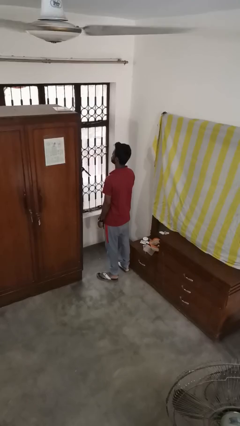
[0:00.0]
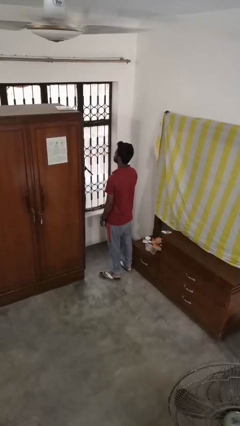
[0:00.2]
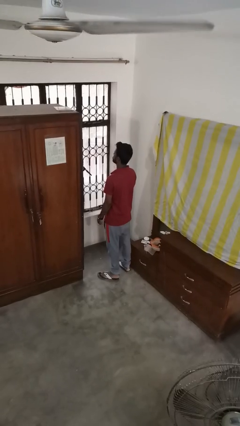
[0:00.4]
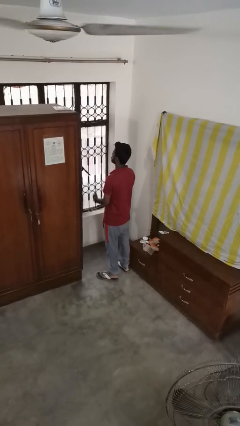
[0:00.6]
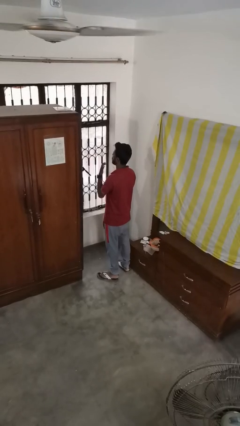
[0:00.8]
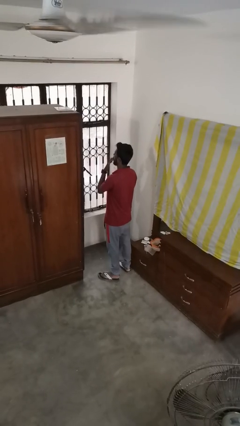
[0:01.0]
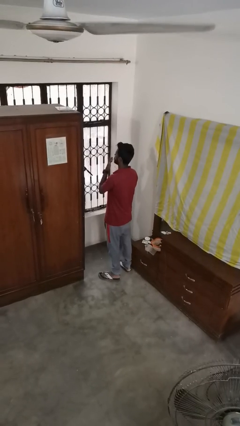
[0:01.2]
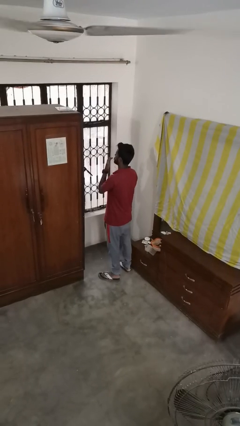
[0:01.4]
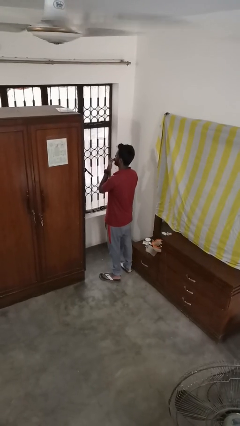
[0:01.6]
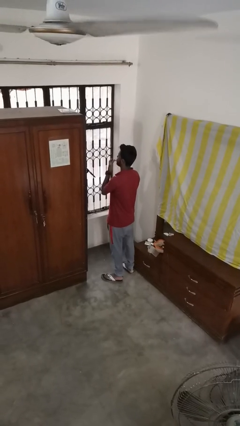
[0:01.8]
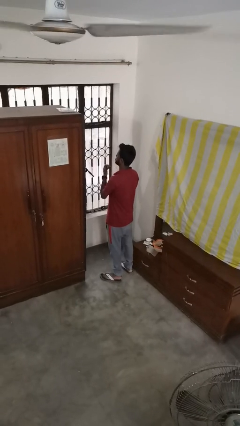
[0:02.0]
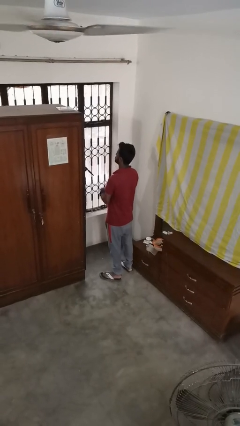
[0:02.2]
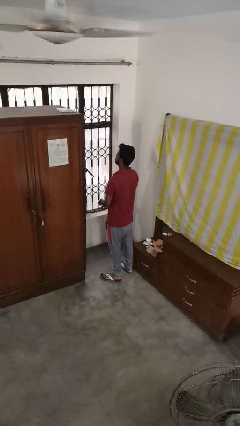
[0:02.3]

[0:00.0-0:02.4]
person licks fingers

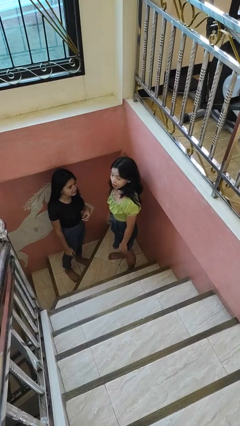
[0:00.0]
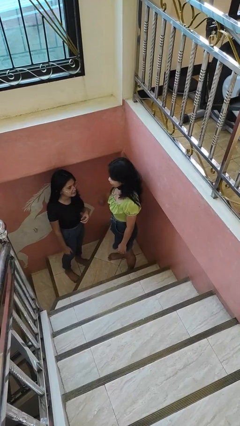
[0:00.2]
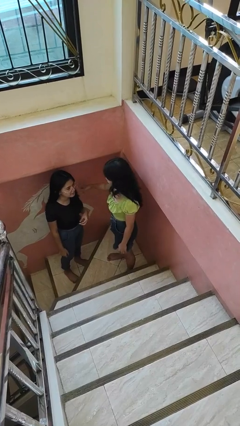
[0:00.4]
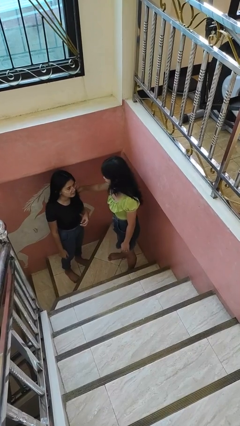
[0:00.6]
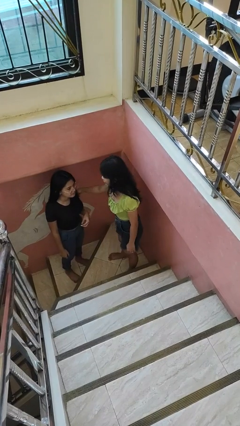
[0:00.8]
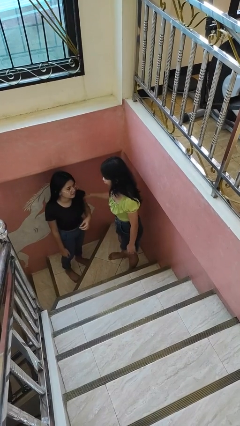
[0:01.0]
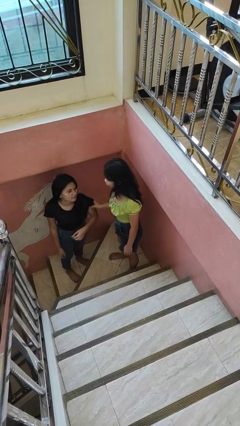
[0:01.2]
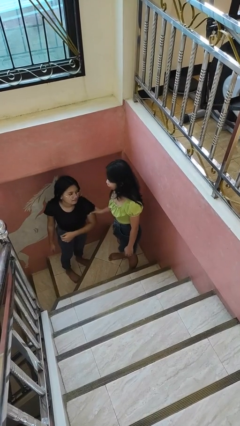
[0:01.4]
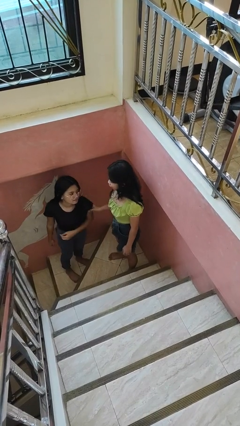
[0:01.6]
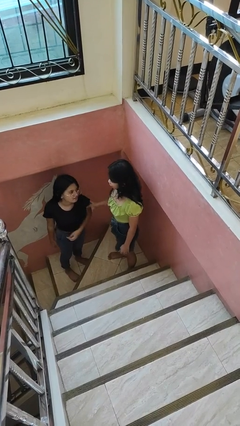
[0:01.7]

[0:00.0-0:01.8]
person grabs person by bicep

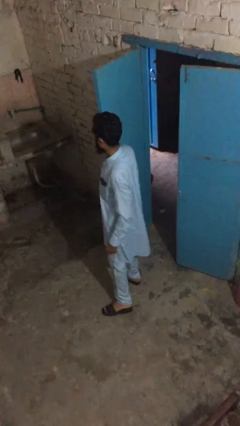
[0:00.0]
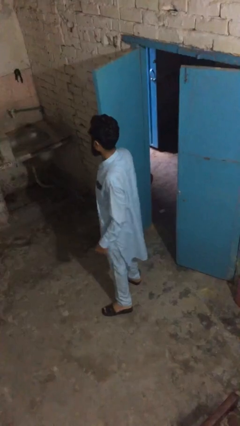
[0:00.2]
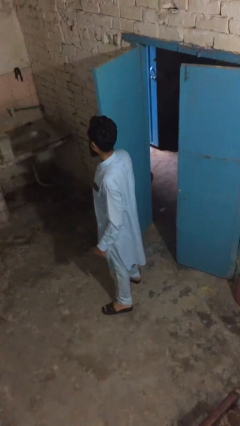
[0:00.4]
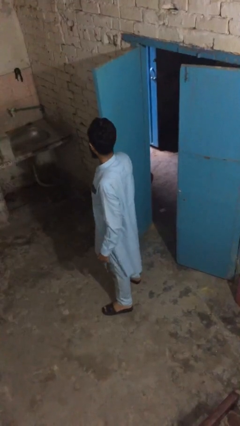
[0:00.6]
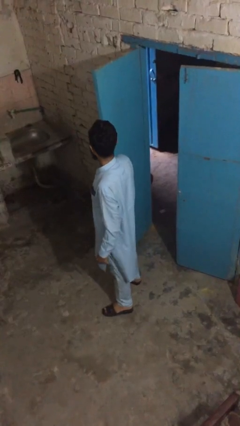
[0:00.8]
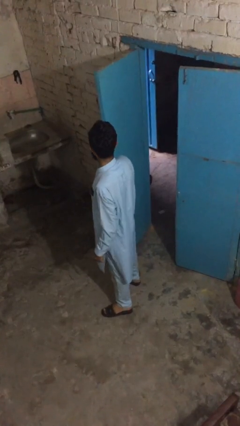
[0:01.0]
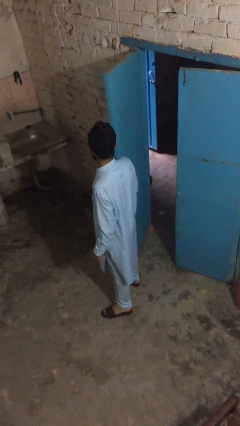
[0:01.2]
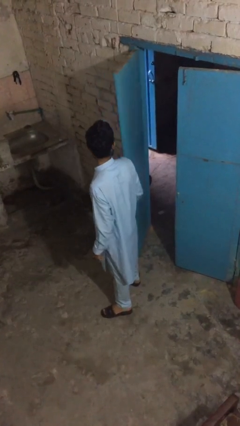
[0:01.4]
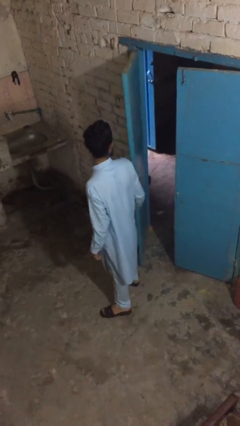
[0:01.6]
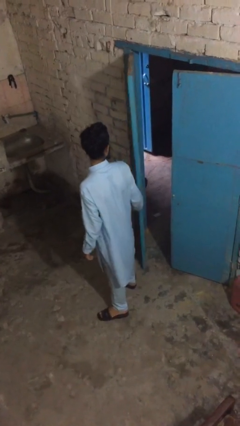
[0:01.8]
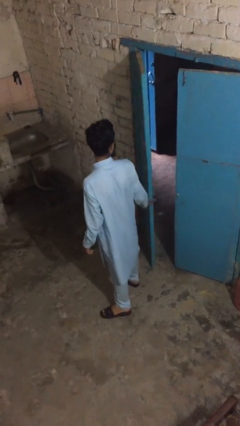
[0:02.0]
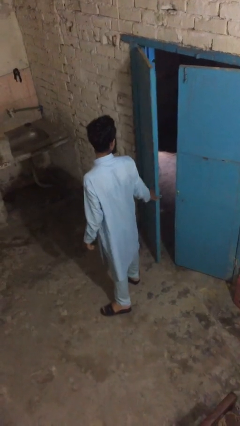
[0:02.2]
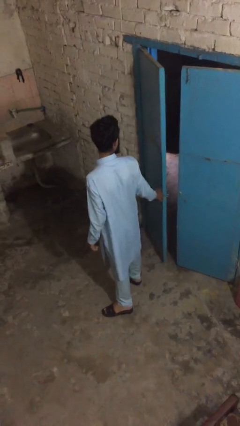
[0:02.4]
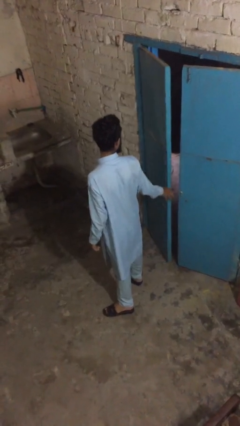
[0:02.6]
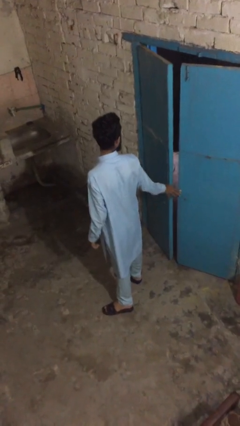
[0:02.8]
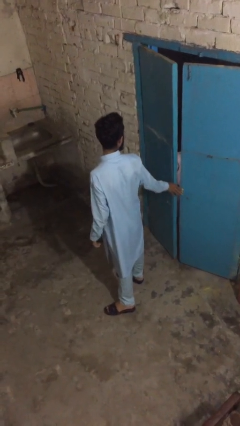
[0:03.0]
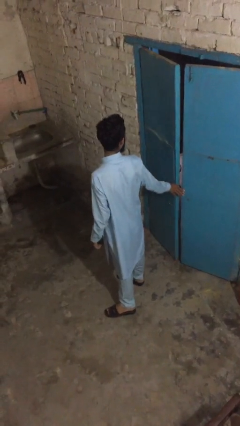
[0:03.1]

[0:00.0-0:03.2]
person closes facility door

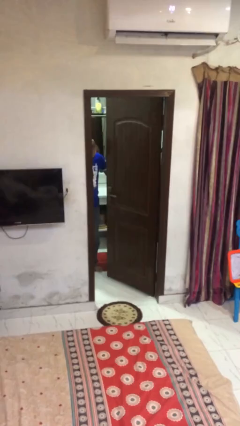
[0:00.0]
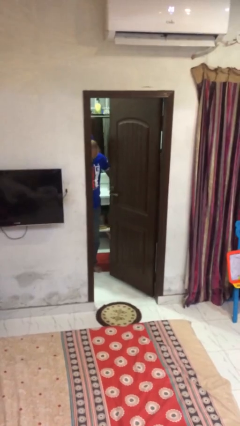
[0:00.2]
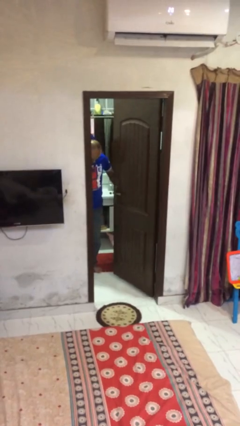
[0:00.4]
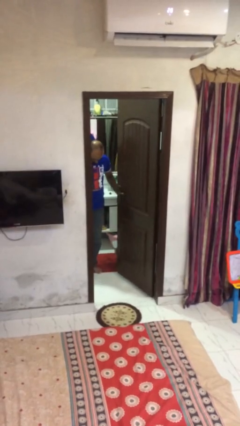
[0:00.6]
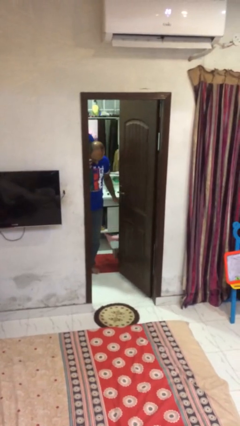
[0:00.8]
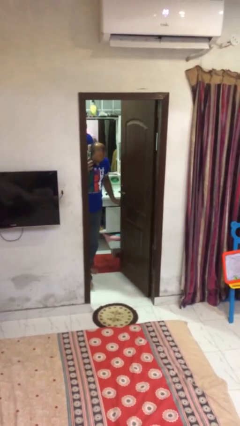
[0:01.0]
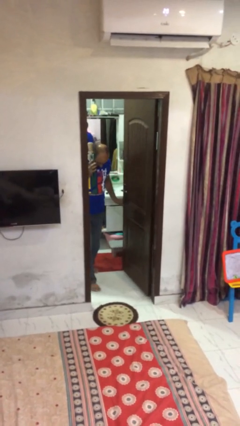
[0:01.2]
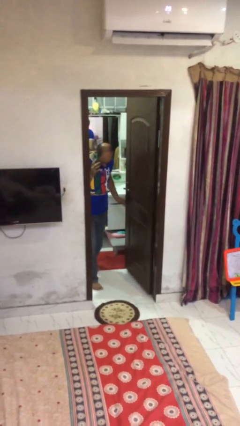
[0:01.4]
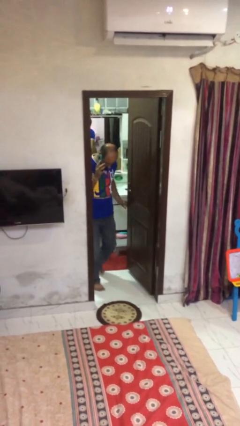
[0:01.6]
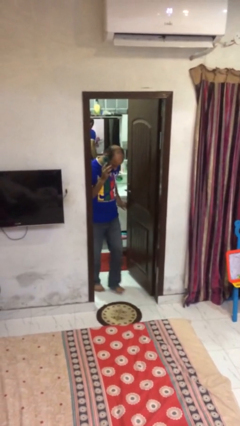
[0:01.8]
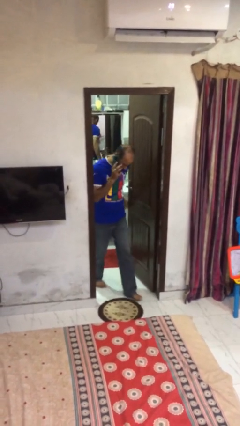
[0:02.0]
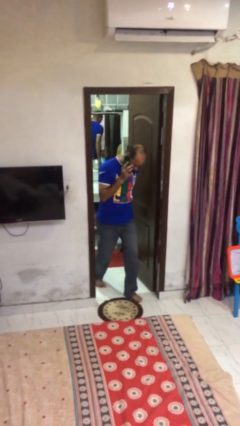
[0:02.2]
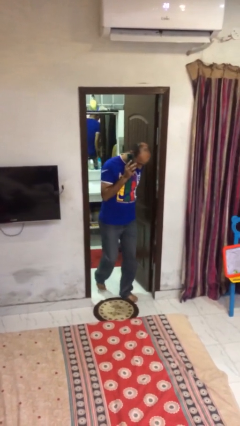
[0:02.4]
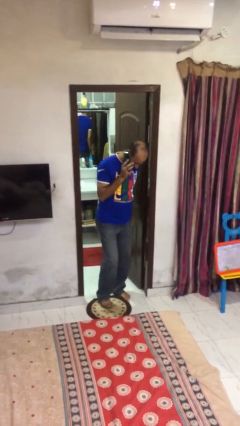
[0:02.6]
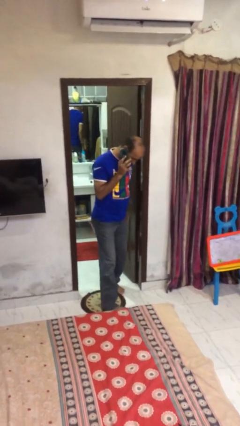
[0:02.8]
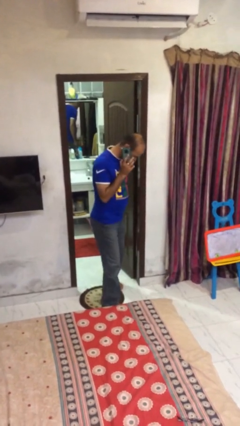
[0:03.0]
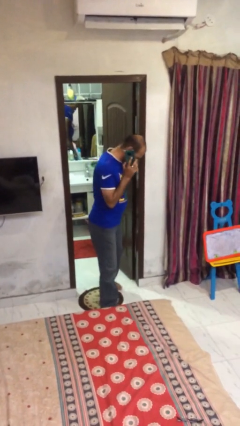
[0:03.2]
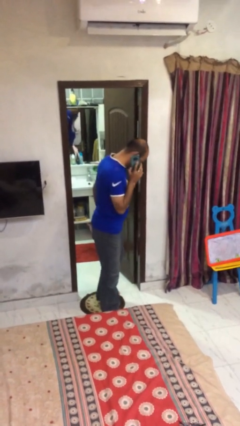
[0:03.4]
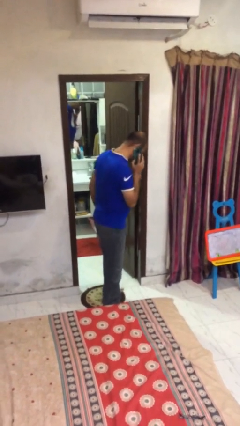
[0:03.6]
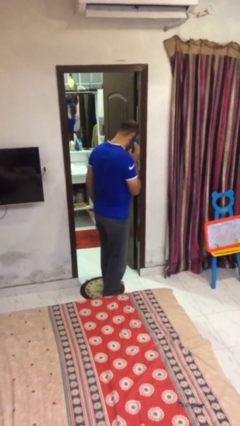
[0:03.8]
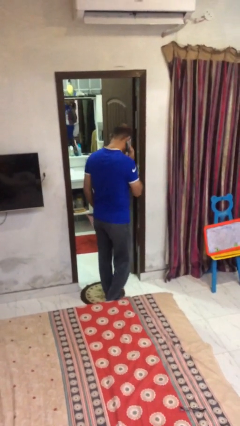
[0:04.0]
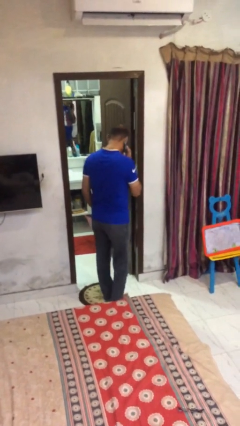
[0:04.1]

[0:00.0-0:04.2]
person enters scene through structure

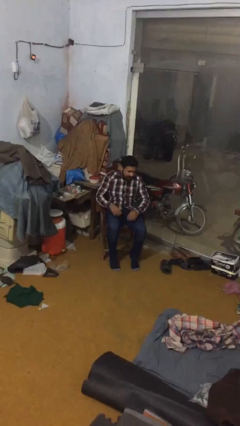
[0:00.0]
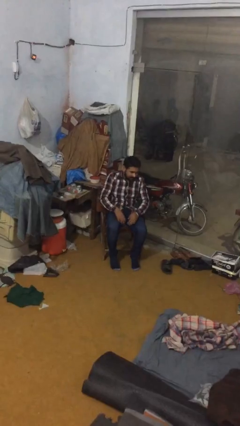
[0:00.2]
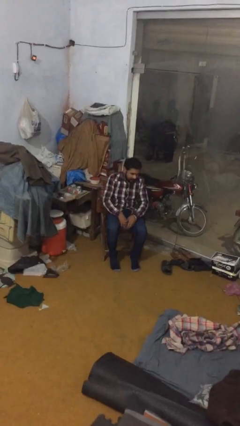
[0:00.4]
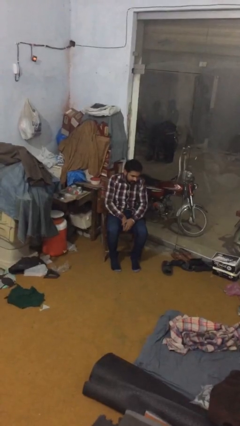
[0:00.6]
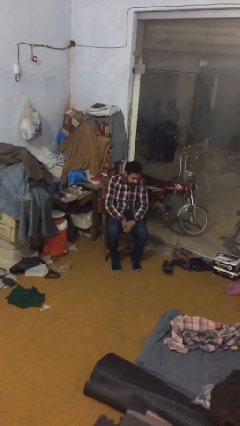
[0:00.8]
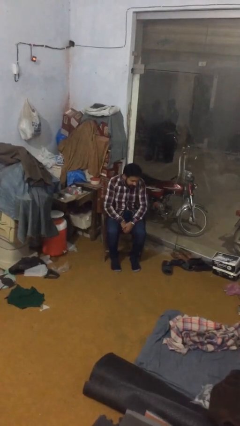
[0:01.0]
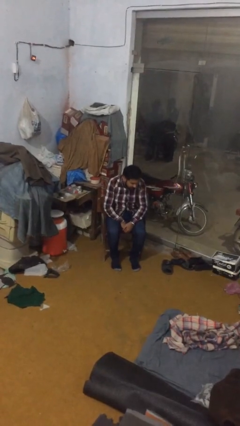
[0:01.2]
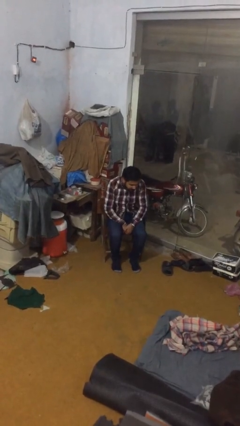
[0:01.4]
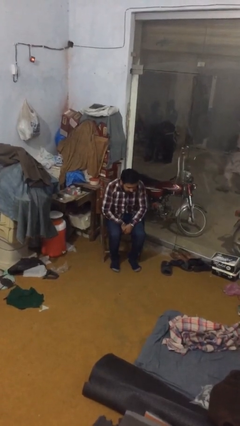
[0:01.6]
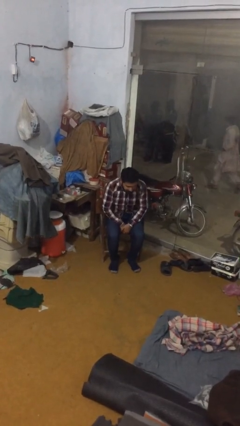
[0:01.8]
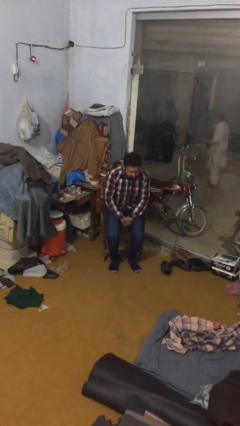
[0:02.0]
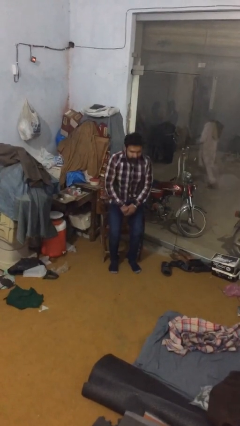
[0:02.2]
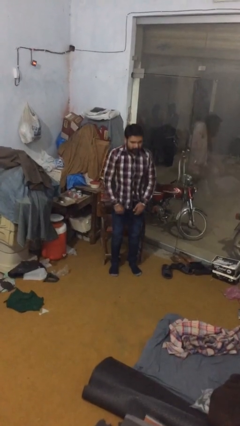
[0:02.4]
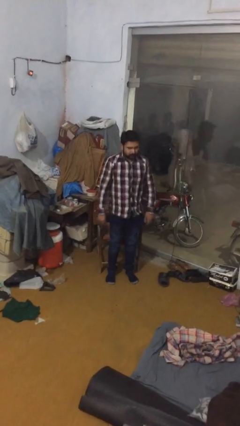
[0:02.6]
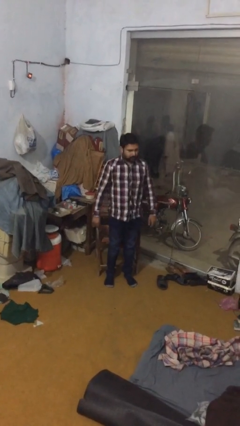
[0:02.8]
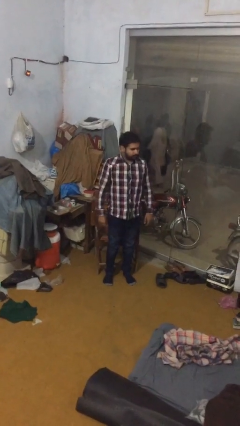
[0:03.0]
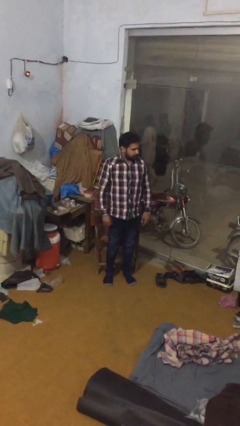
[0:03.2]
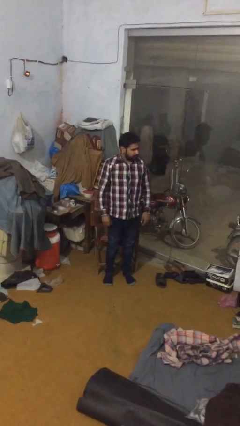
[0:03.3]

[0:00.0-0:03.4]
person stands up

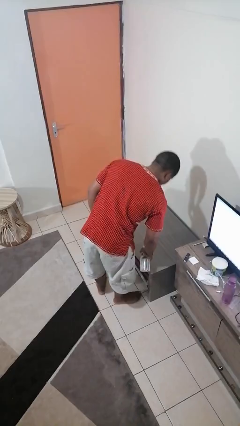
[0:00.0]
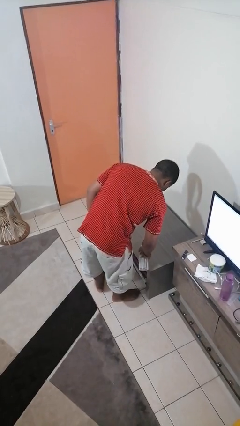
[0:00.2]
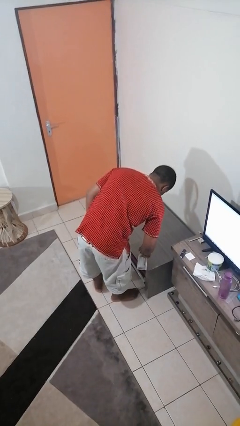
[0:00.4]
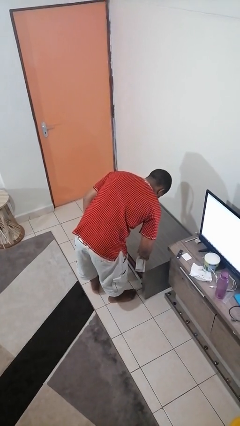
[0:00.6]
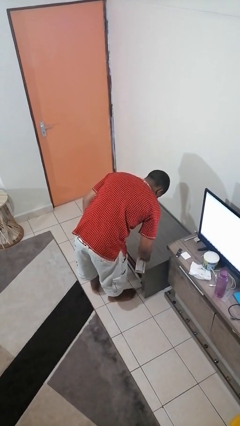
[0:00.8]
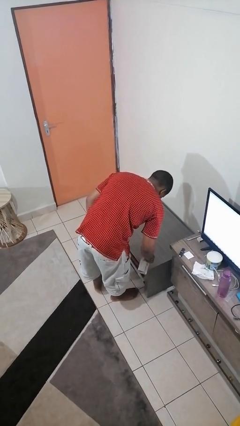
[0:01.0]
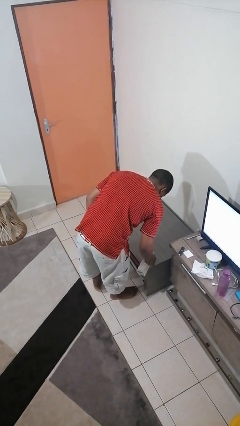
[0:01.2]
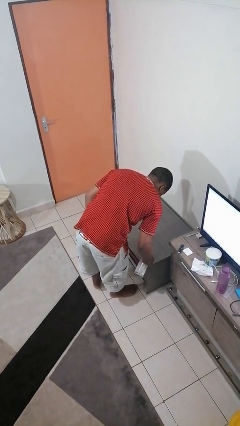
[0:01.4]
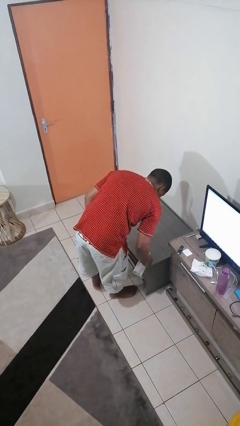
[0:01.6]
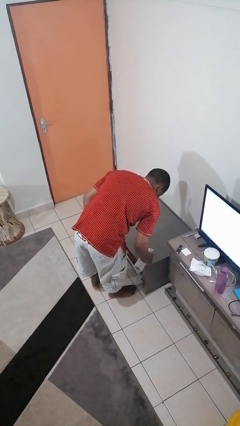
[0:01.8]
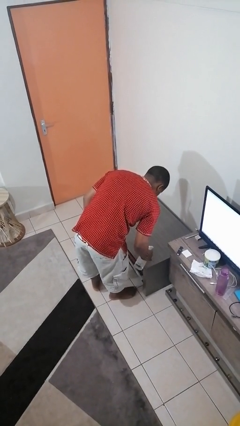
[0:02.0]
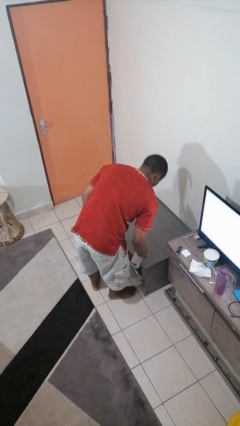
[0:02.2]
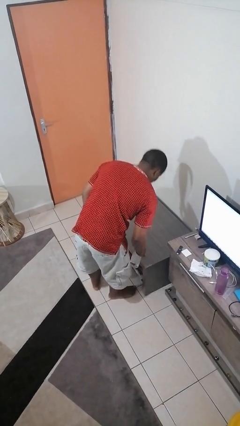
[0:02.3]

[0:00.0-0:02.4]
person sprays from bottle

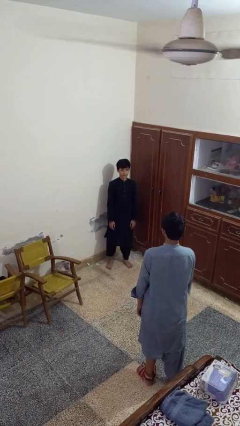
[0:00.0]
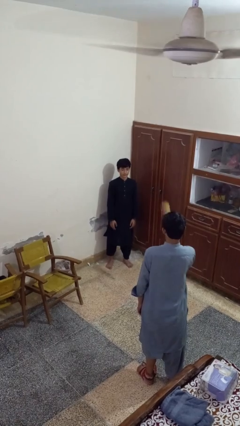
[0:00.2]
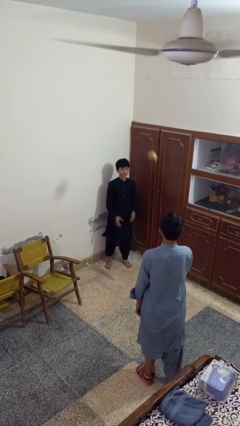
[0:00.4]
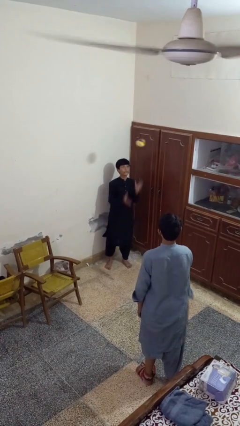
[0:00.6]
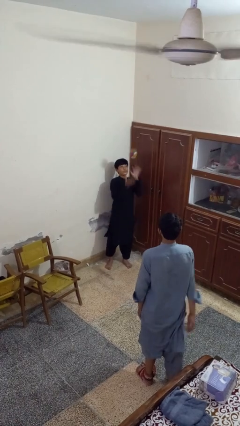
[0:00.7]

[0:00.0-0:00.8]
person catches object from person
